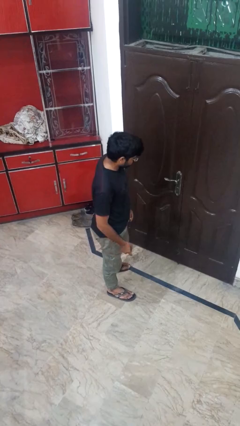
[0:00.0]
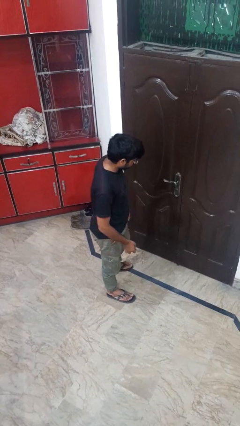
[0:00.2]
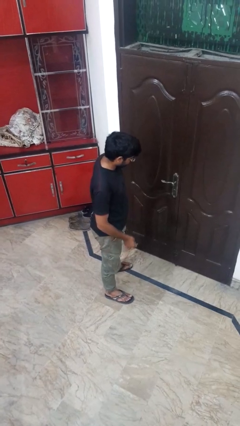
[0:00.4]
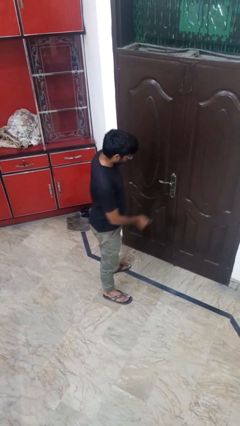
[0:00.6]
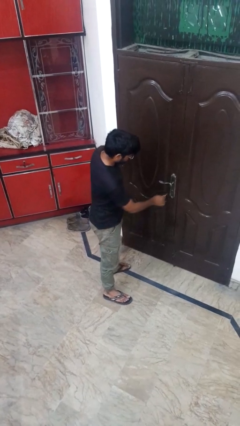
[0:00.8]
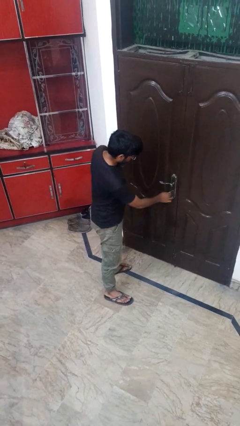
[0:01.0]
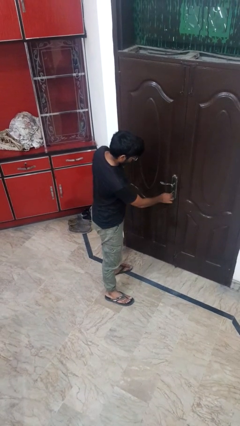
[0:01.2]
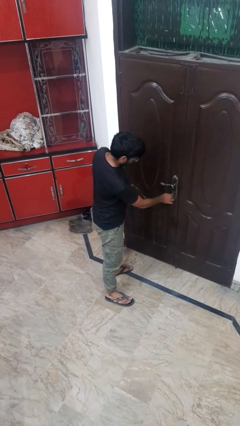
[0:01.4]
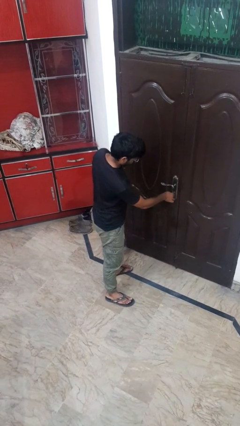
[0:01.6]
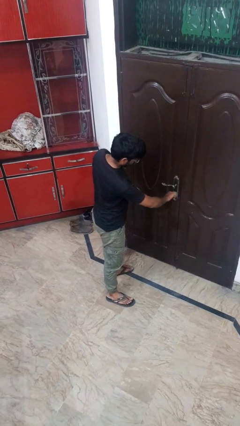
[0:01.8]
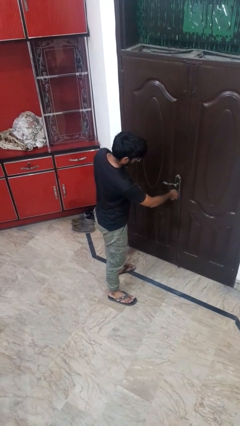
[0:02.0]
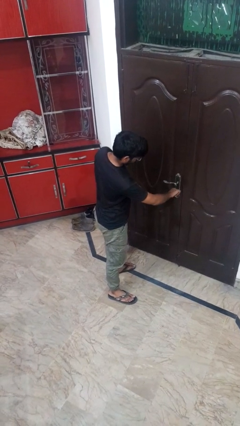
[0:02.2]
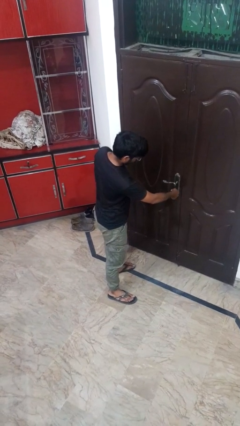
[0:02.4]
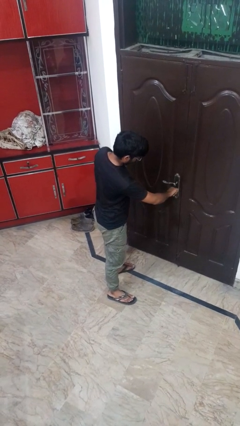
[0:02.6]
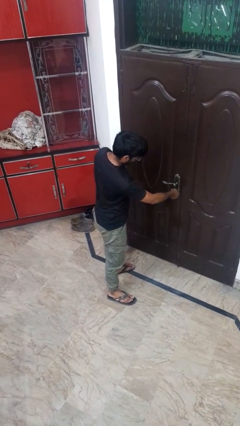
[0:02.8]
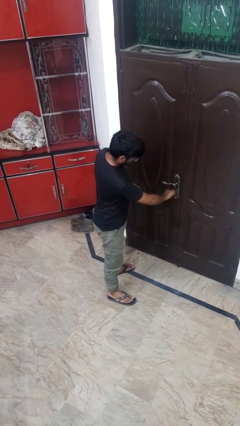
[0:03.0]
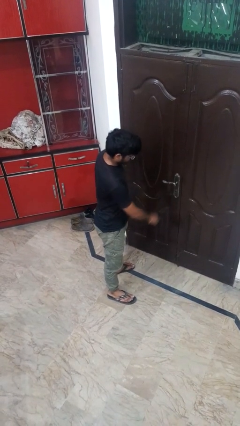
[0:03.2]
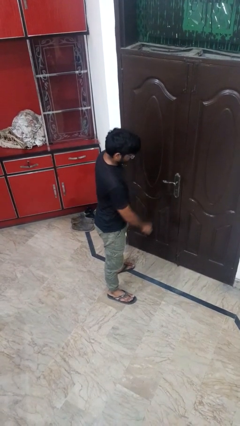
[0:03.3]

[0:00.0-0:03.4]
person unlocks door with keys

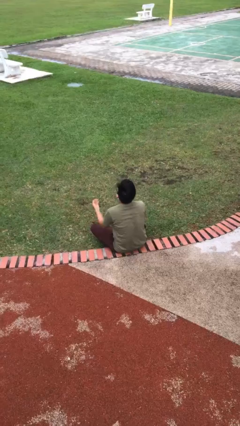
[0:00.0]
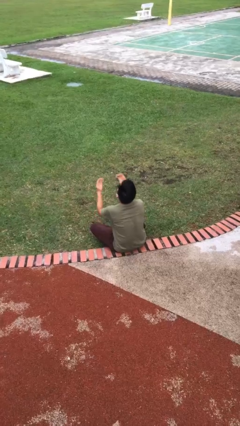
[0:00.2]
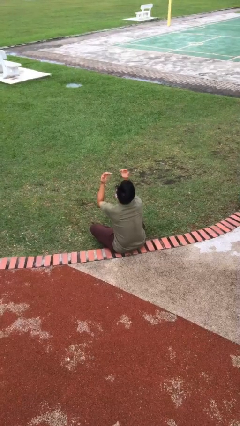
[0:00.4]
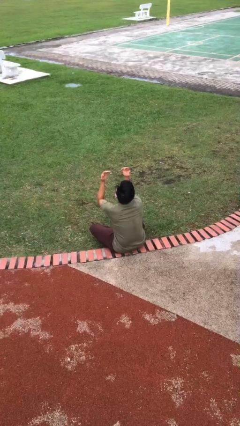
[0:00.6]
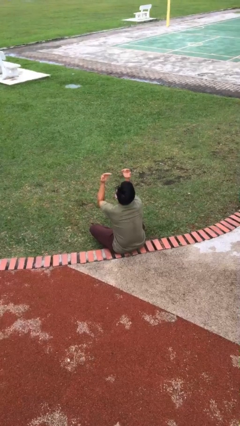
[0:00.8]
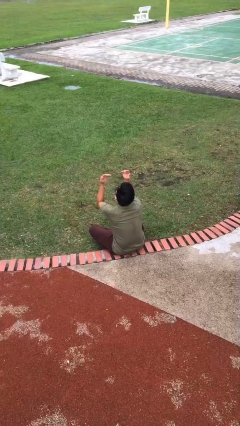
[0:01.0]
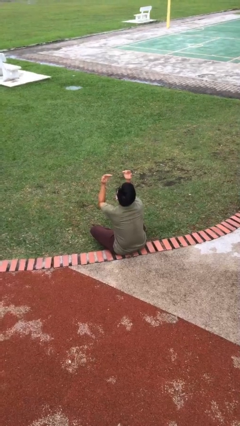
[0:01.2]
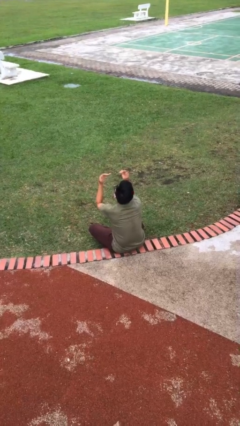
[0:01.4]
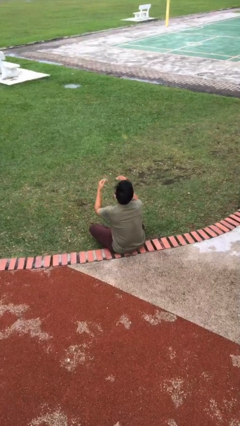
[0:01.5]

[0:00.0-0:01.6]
person prays

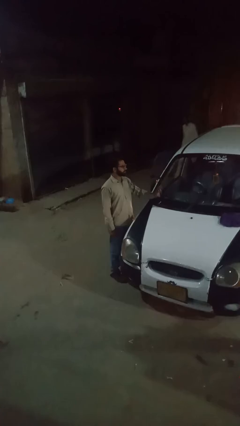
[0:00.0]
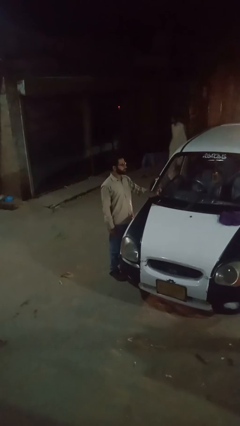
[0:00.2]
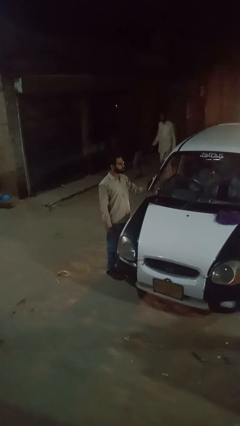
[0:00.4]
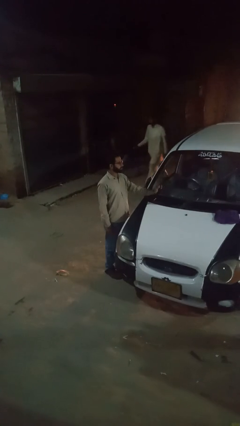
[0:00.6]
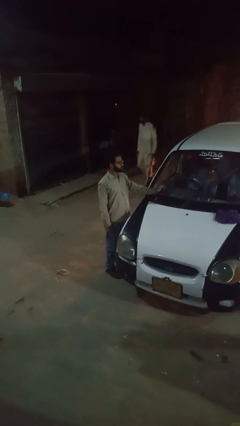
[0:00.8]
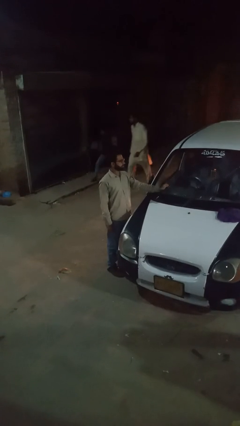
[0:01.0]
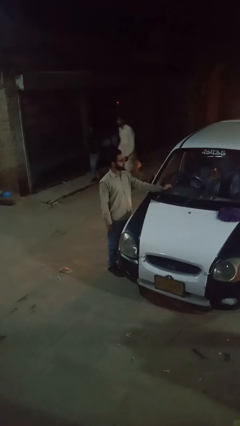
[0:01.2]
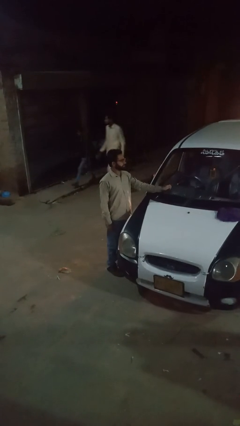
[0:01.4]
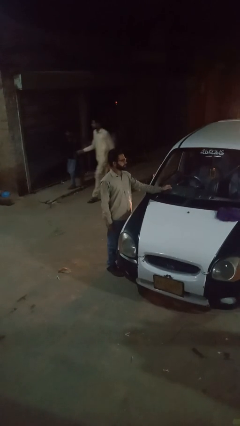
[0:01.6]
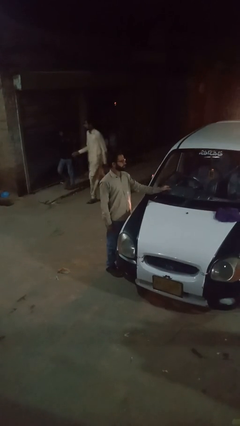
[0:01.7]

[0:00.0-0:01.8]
person flips down car wipers

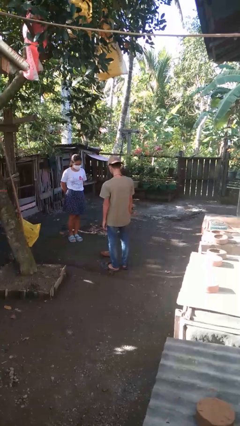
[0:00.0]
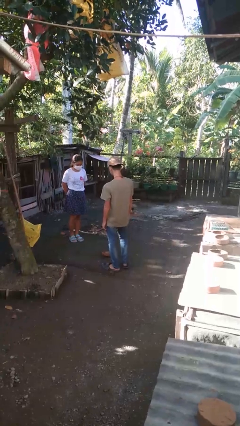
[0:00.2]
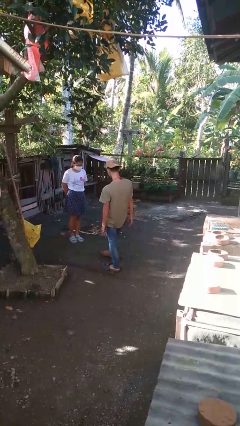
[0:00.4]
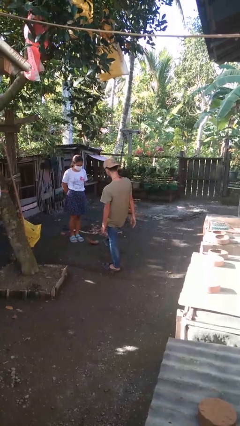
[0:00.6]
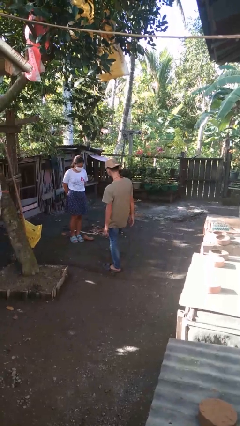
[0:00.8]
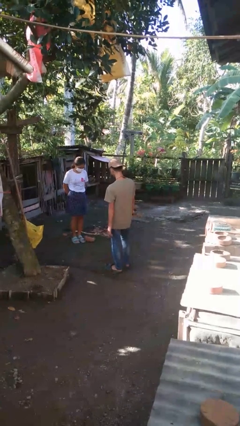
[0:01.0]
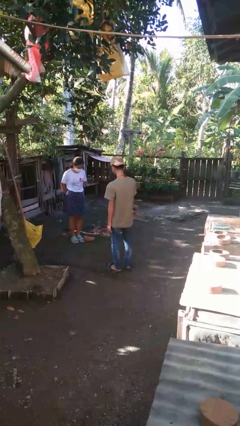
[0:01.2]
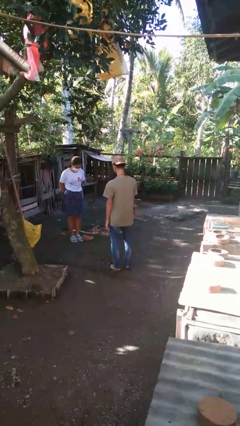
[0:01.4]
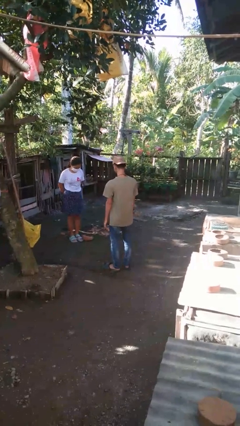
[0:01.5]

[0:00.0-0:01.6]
person kicks object to person

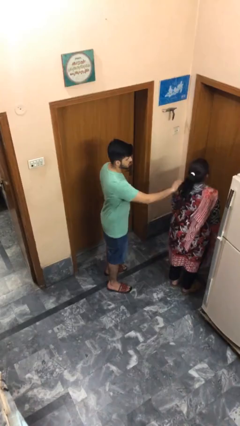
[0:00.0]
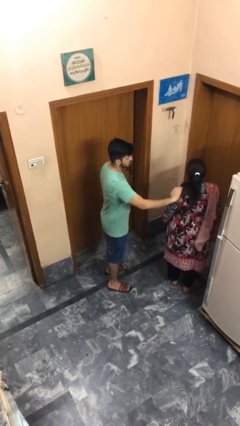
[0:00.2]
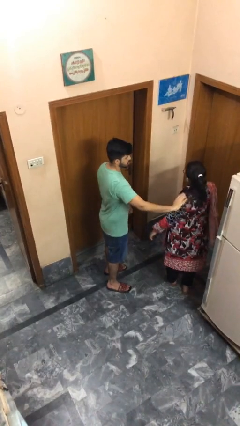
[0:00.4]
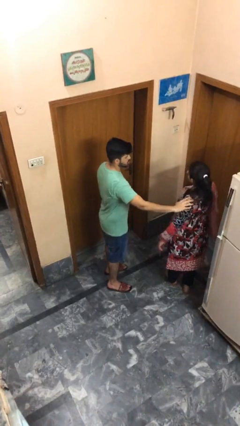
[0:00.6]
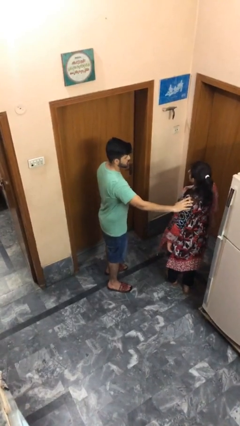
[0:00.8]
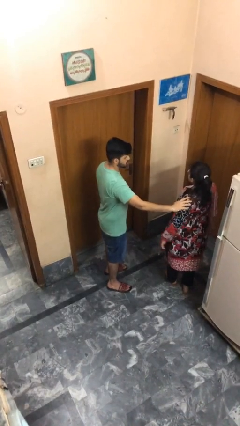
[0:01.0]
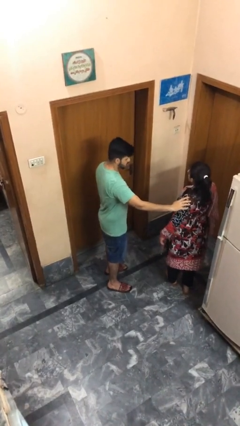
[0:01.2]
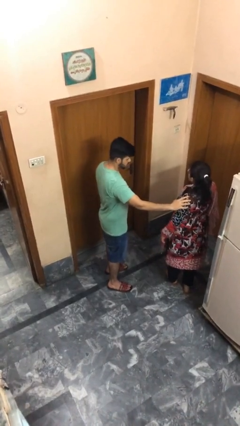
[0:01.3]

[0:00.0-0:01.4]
person spins person around

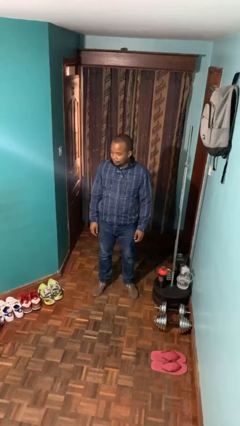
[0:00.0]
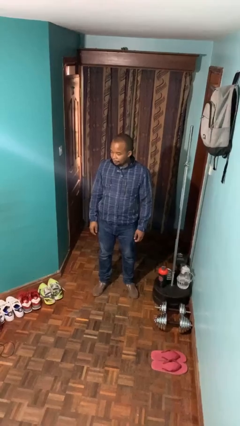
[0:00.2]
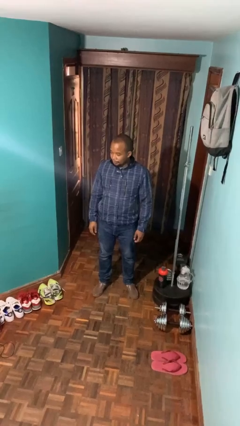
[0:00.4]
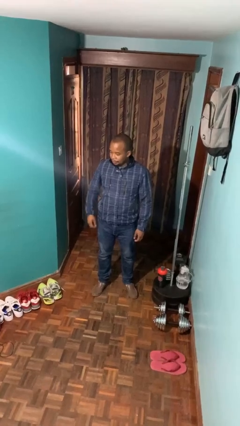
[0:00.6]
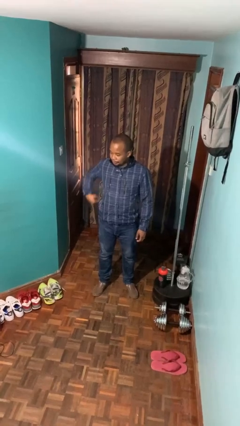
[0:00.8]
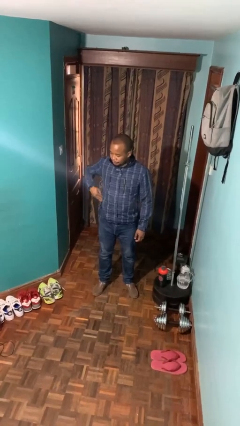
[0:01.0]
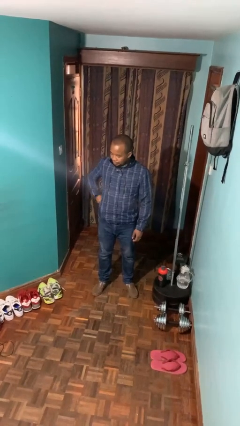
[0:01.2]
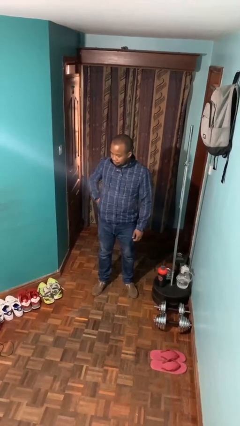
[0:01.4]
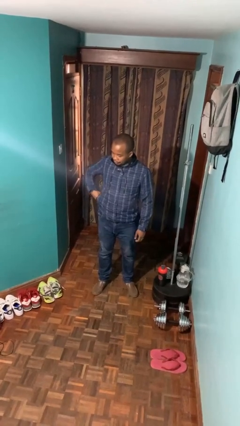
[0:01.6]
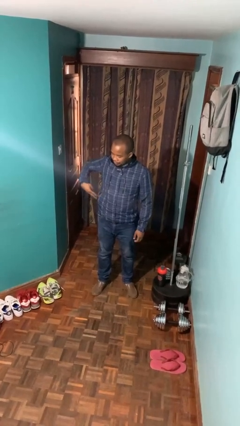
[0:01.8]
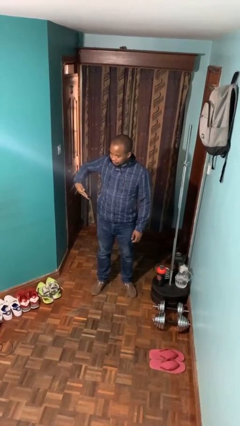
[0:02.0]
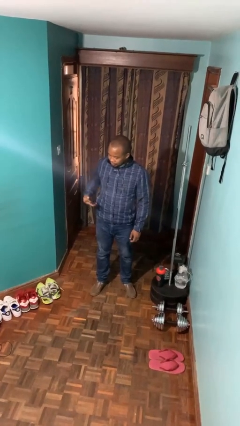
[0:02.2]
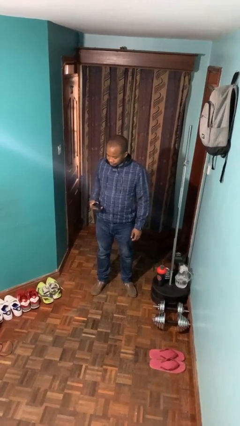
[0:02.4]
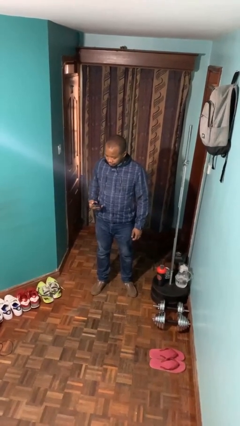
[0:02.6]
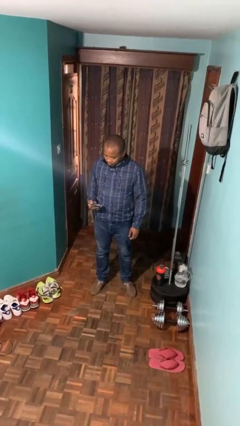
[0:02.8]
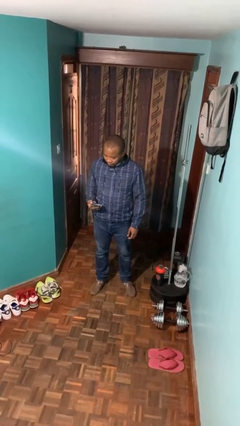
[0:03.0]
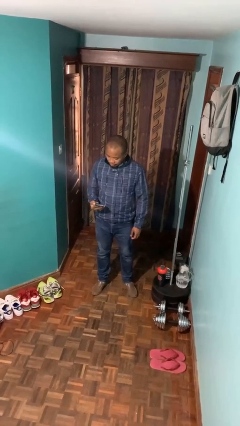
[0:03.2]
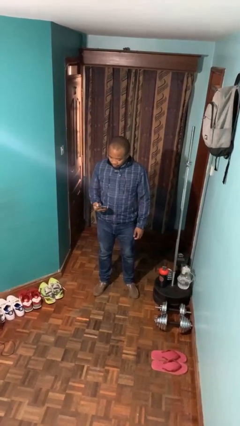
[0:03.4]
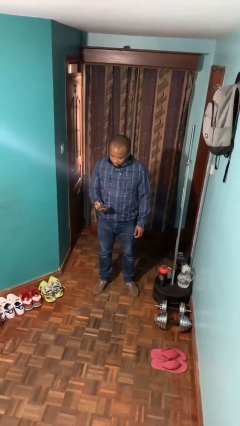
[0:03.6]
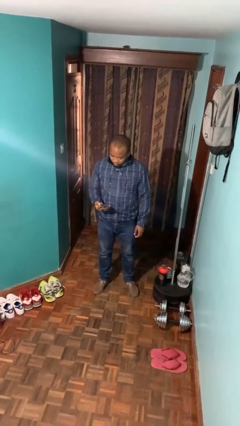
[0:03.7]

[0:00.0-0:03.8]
person takes phone from pocket

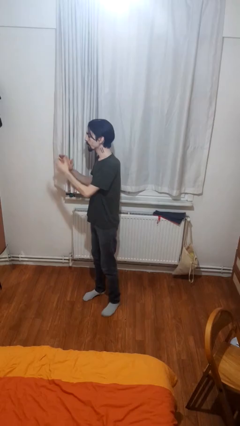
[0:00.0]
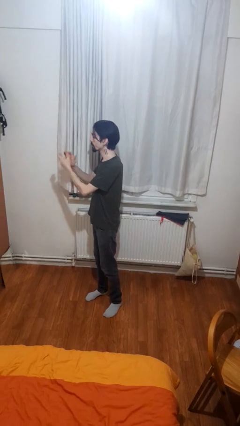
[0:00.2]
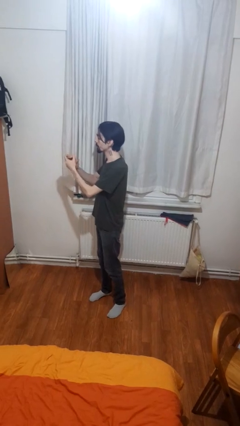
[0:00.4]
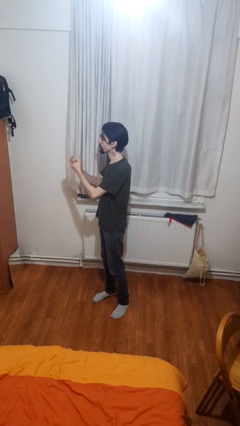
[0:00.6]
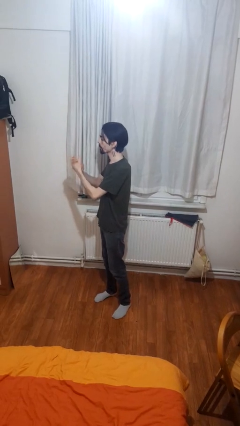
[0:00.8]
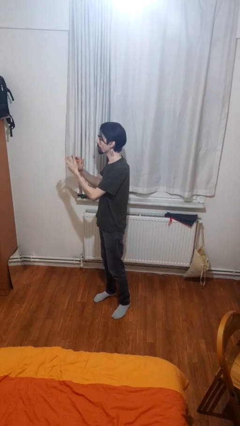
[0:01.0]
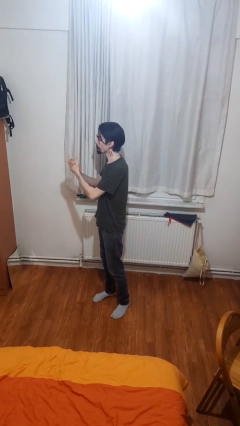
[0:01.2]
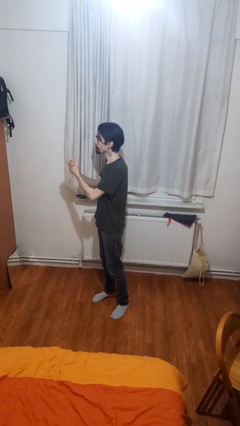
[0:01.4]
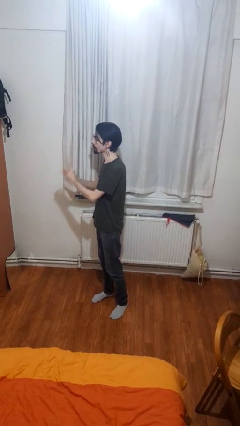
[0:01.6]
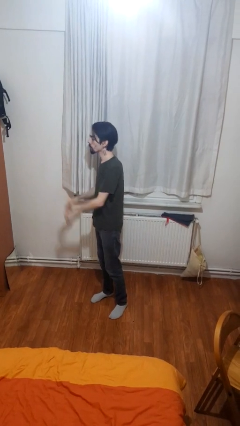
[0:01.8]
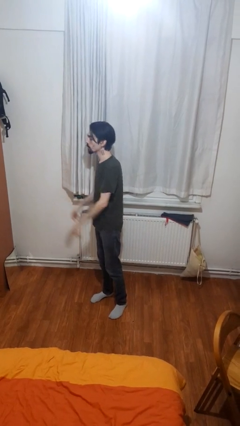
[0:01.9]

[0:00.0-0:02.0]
person claps hands

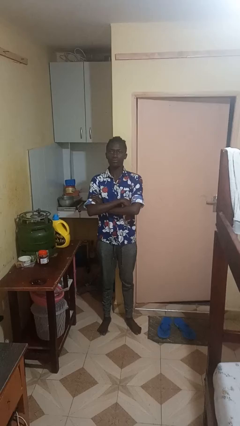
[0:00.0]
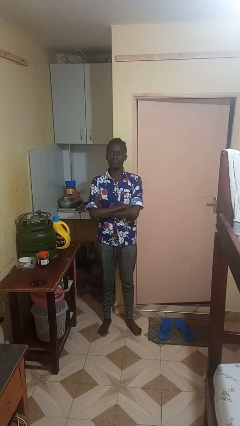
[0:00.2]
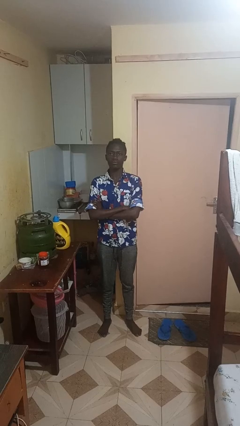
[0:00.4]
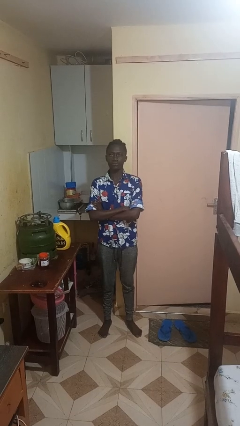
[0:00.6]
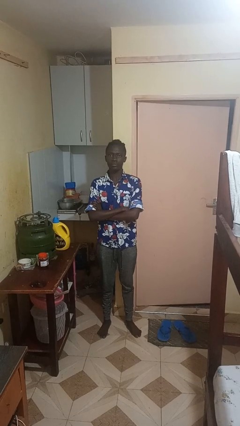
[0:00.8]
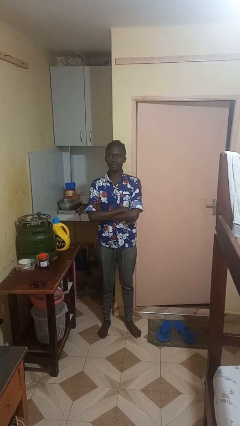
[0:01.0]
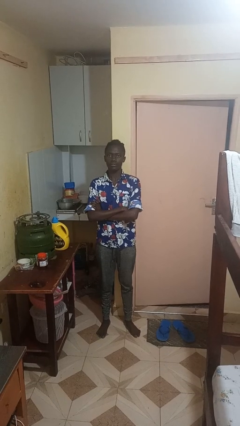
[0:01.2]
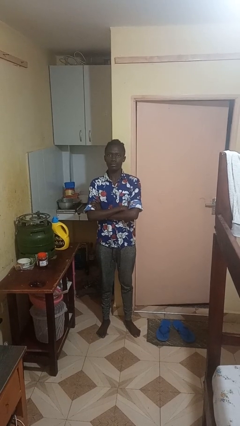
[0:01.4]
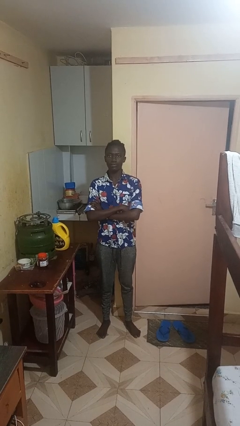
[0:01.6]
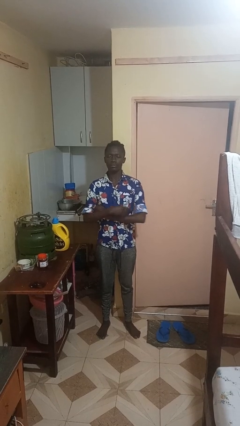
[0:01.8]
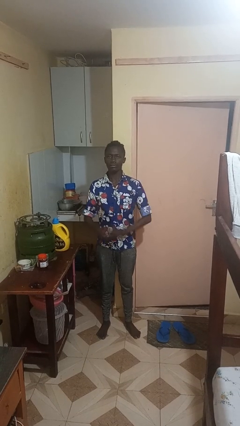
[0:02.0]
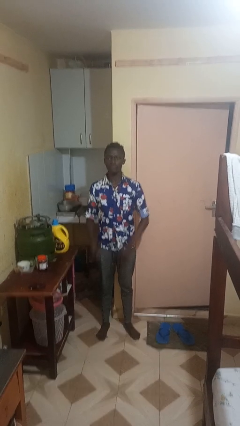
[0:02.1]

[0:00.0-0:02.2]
person crosses arms
